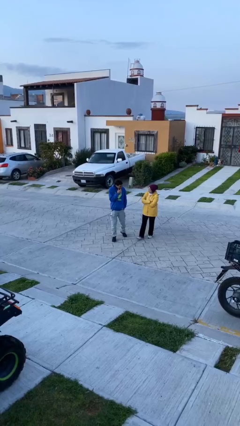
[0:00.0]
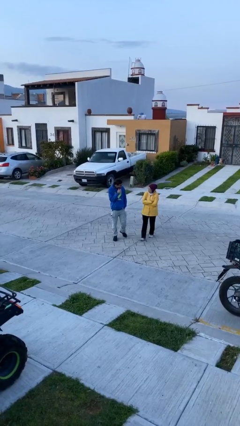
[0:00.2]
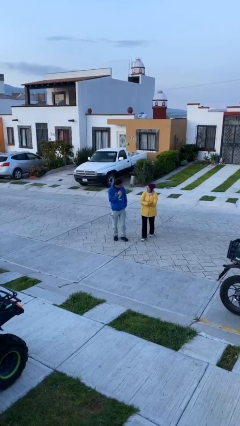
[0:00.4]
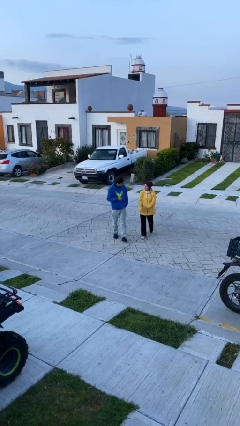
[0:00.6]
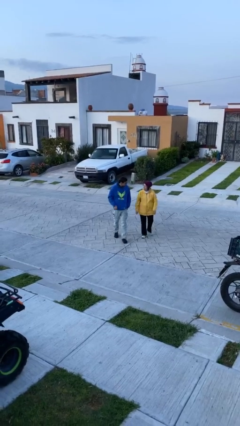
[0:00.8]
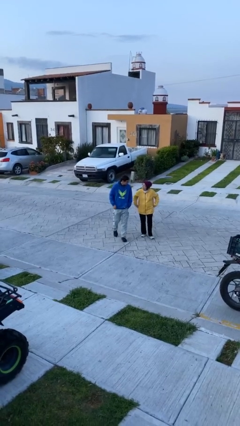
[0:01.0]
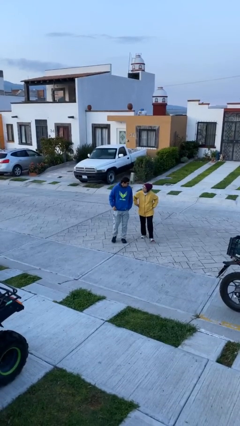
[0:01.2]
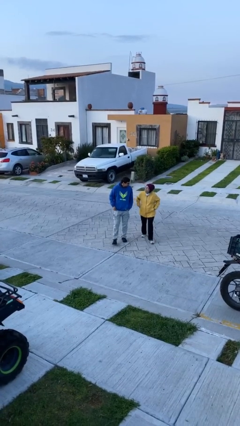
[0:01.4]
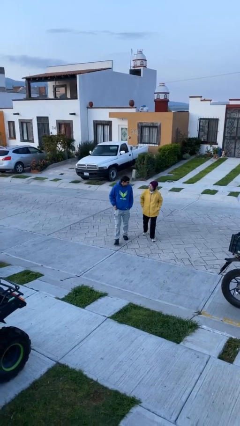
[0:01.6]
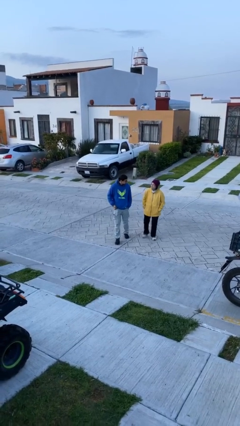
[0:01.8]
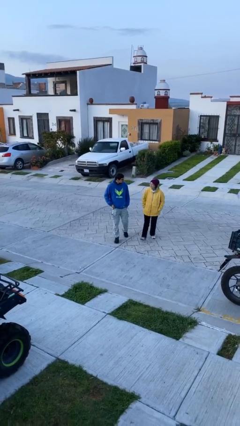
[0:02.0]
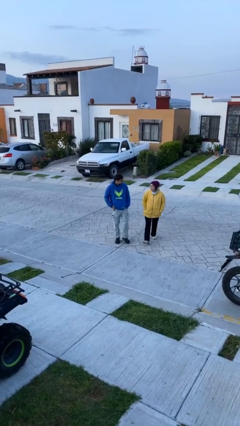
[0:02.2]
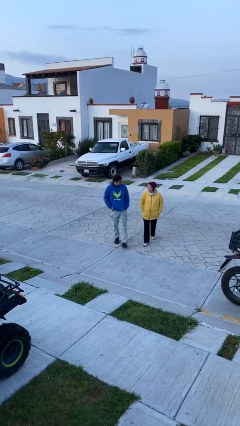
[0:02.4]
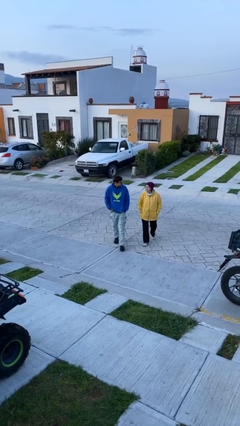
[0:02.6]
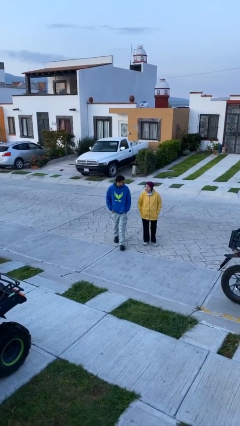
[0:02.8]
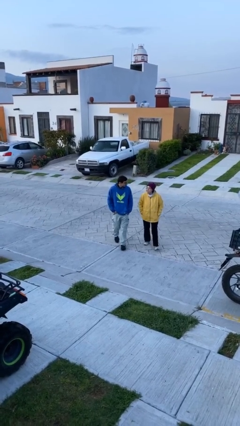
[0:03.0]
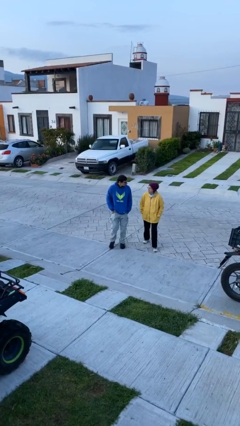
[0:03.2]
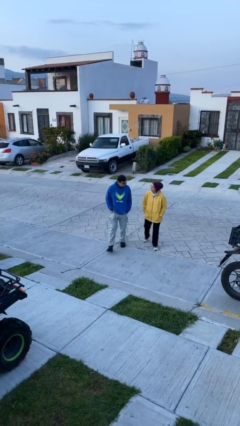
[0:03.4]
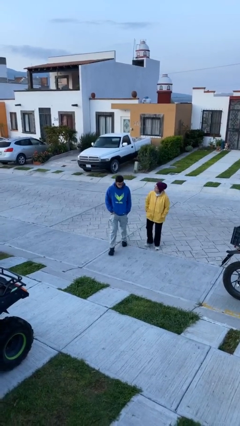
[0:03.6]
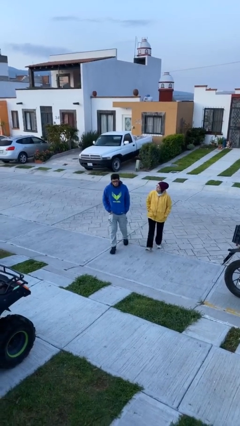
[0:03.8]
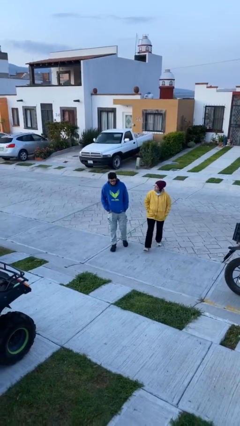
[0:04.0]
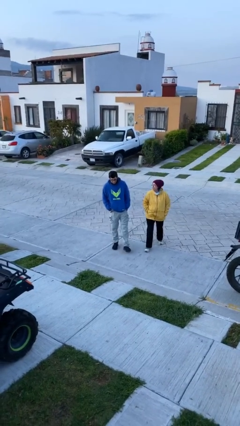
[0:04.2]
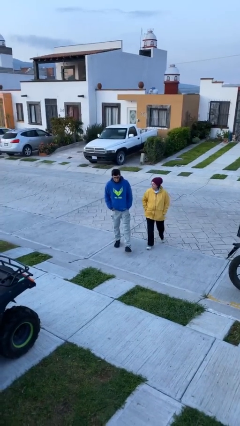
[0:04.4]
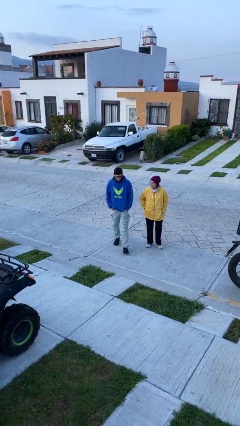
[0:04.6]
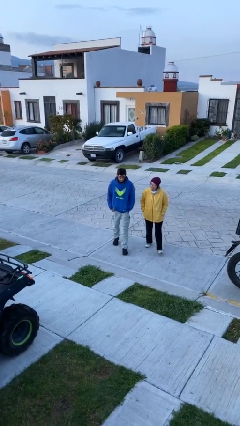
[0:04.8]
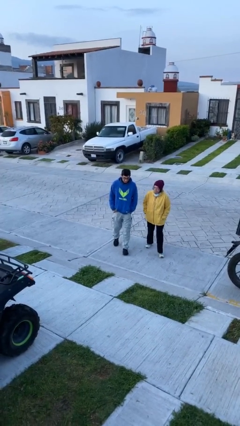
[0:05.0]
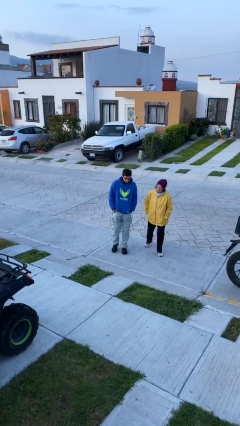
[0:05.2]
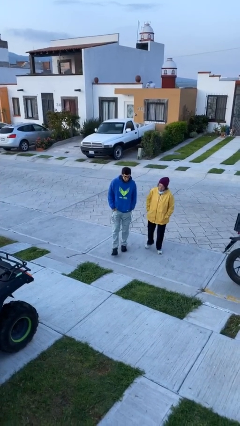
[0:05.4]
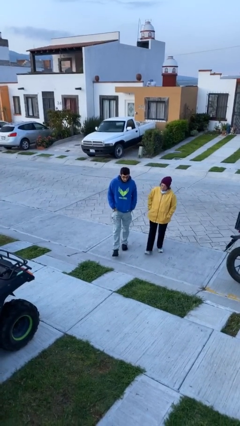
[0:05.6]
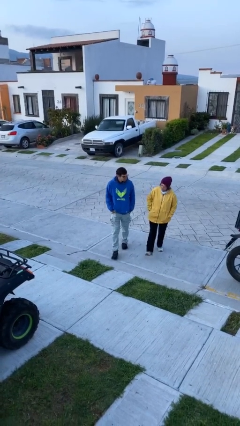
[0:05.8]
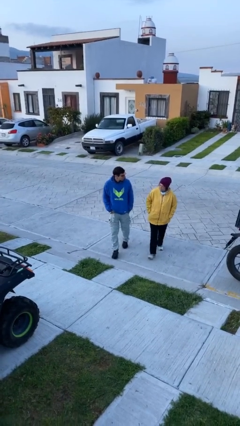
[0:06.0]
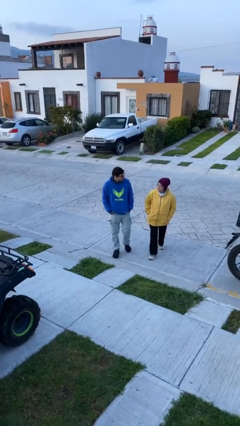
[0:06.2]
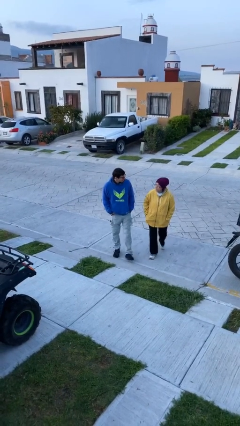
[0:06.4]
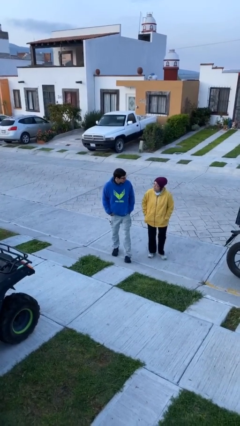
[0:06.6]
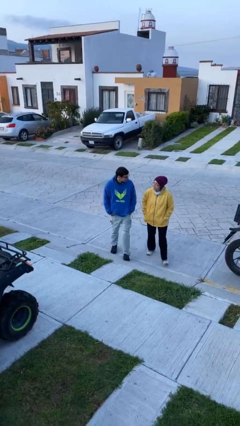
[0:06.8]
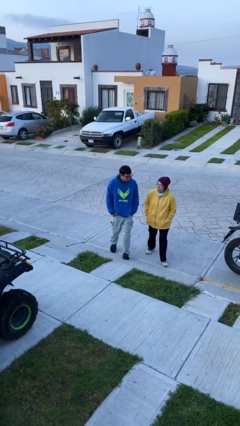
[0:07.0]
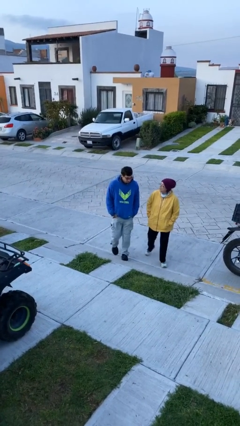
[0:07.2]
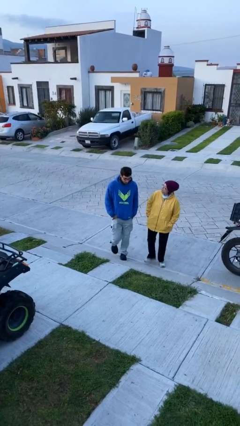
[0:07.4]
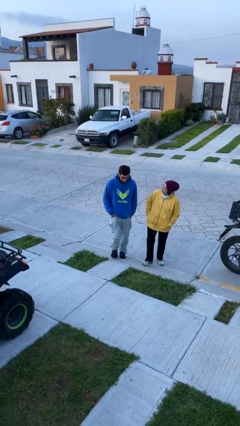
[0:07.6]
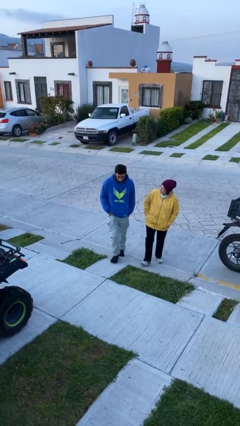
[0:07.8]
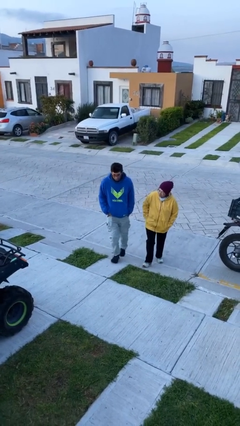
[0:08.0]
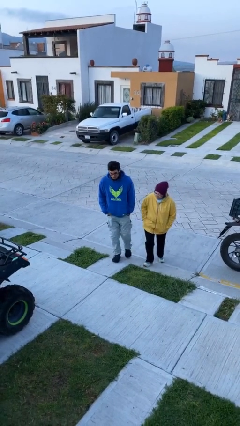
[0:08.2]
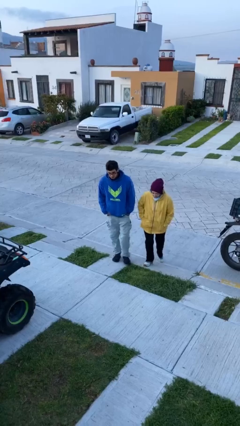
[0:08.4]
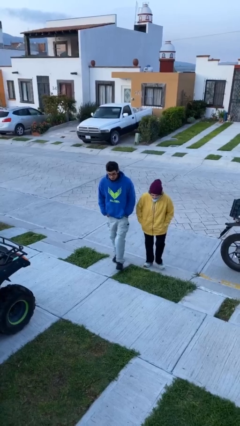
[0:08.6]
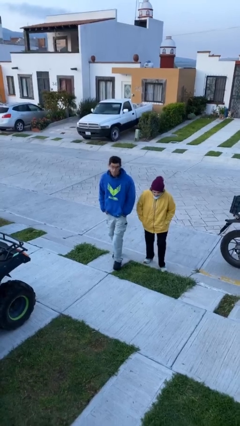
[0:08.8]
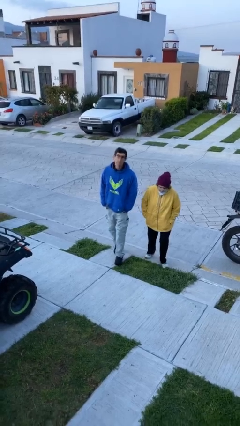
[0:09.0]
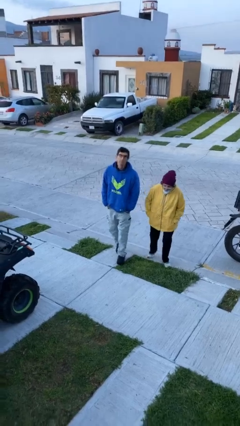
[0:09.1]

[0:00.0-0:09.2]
person talks to person

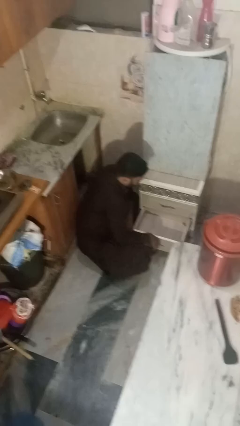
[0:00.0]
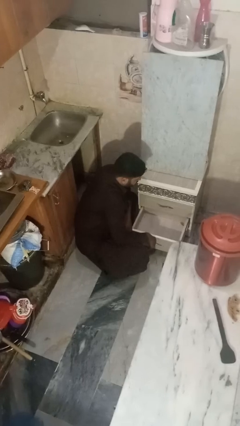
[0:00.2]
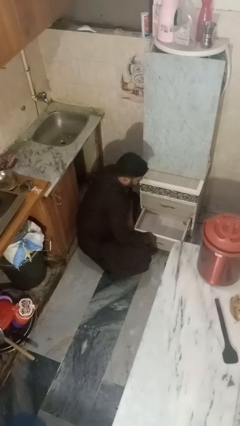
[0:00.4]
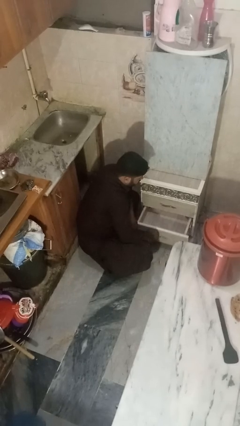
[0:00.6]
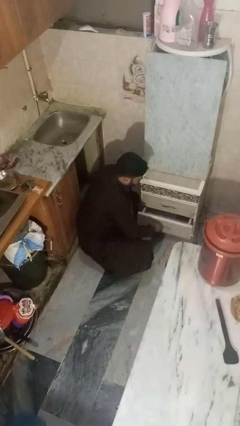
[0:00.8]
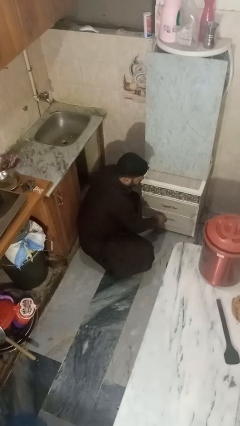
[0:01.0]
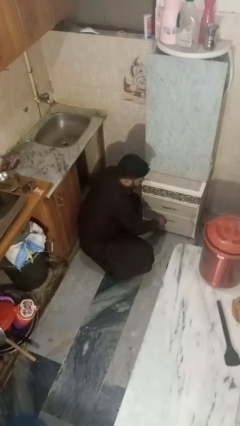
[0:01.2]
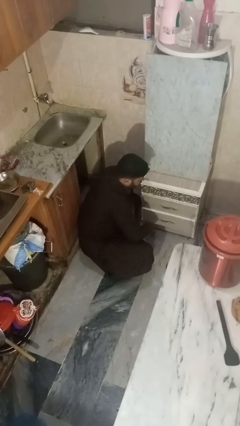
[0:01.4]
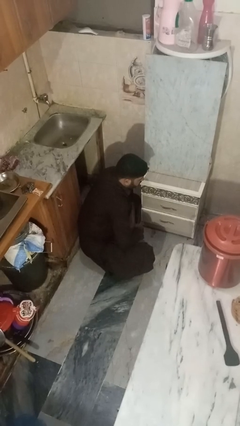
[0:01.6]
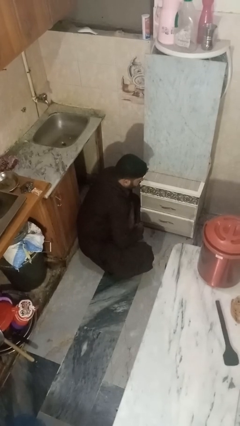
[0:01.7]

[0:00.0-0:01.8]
person closes kitchen drawer

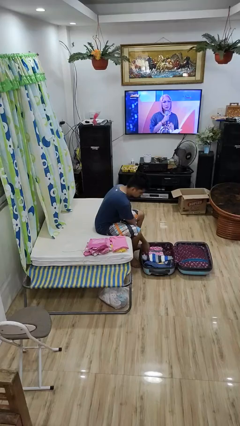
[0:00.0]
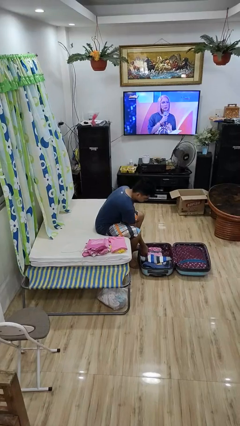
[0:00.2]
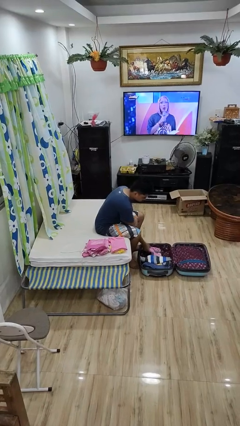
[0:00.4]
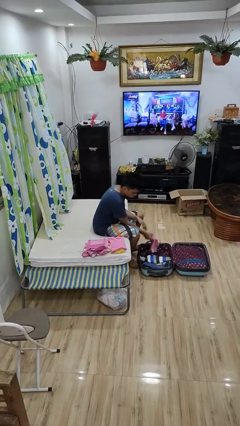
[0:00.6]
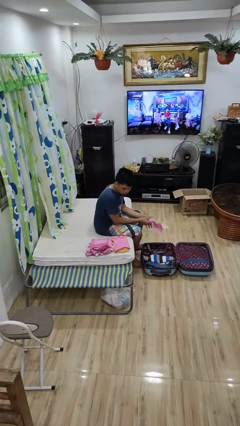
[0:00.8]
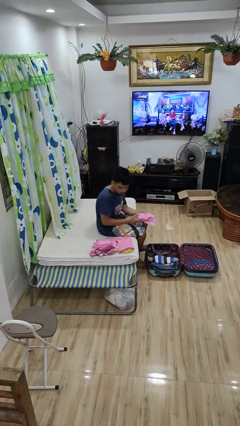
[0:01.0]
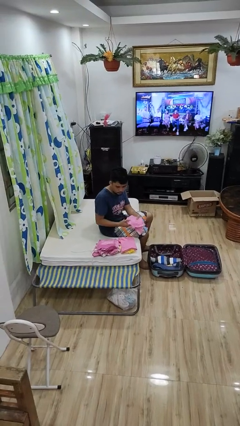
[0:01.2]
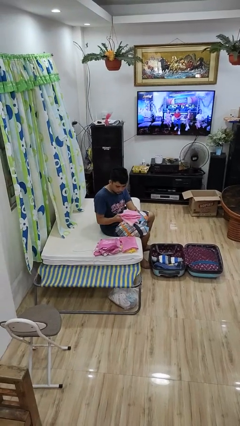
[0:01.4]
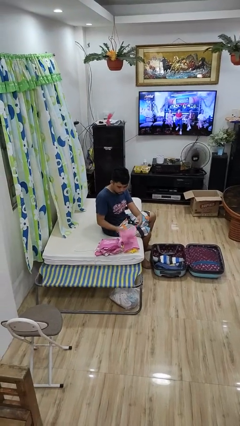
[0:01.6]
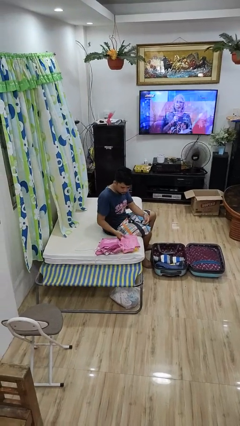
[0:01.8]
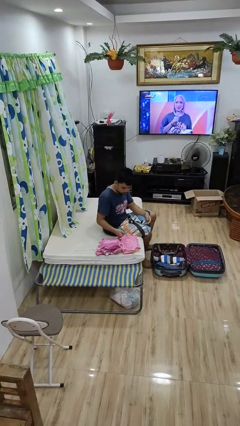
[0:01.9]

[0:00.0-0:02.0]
person unloads clothes from suitcase

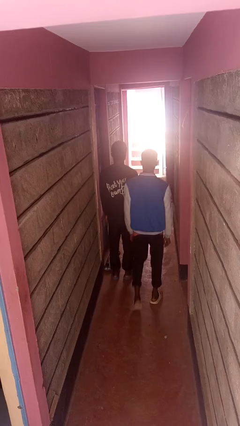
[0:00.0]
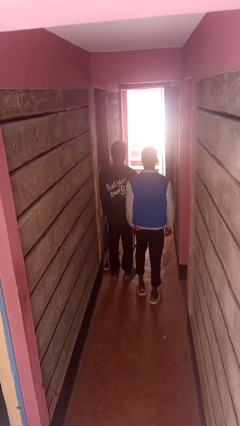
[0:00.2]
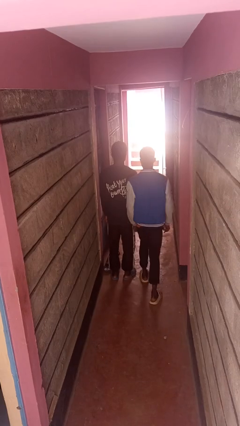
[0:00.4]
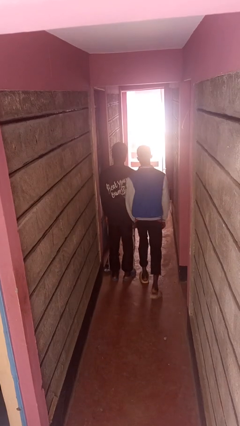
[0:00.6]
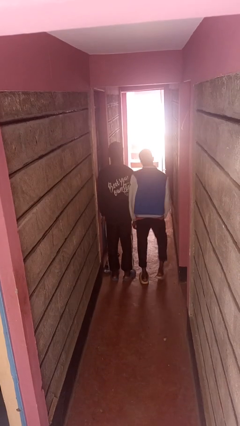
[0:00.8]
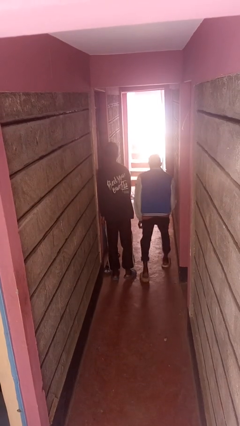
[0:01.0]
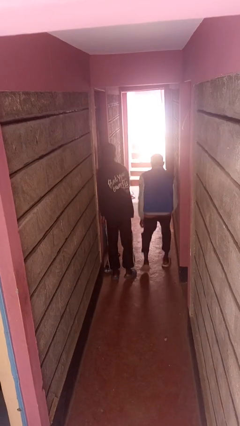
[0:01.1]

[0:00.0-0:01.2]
person bumps into person

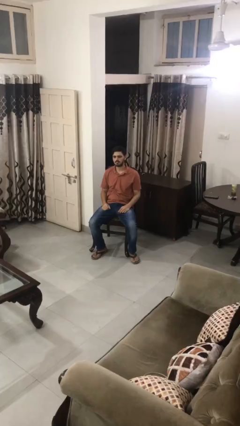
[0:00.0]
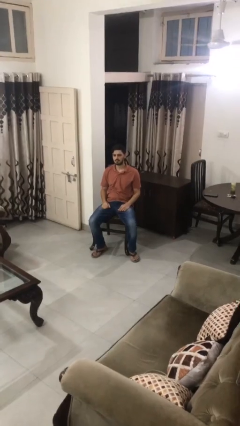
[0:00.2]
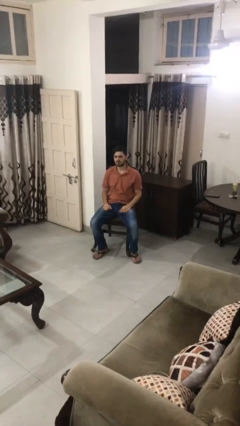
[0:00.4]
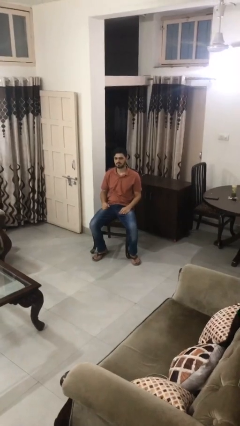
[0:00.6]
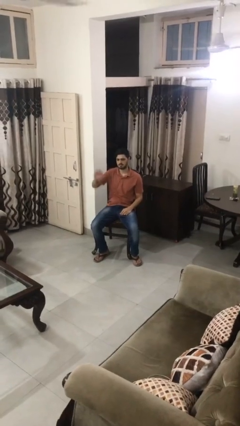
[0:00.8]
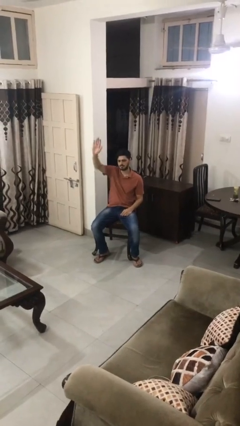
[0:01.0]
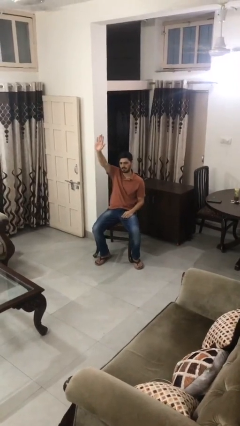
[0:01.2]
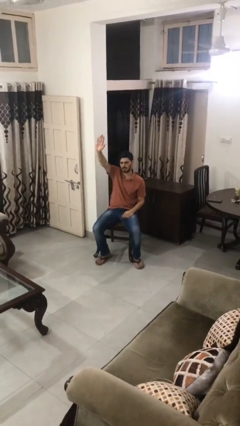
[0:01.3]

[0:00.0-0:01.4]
person gestures raise hand

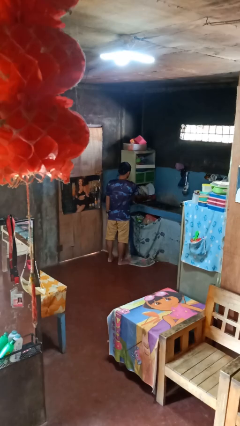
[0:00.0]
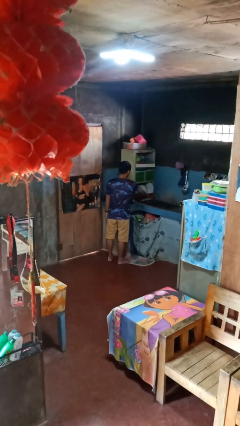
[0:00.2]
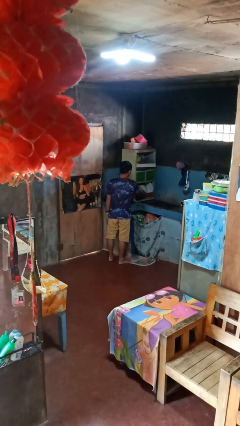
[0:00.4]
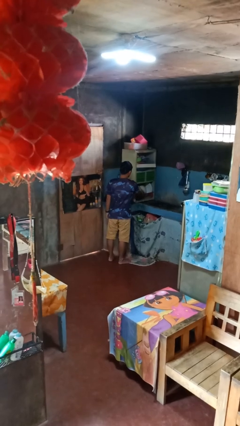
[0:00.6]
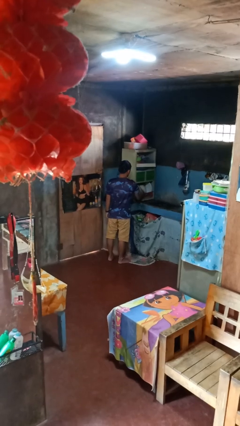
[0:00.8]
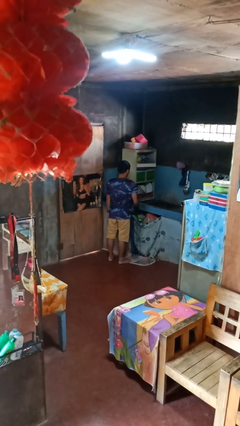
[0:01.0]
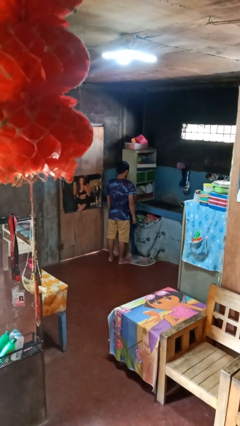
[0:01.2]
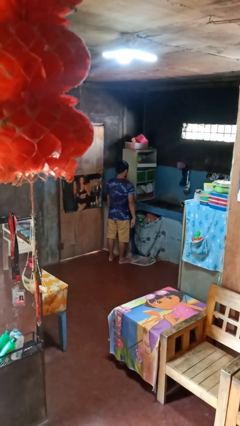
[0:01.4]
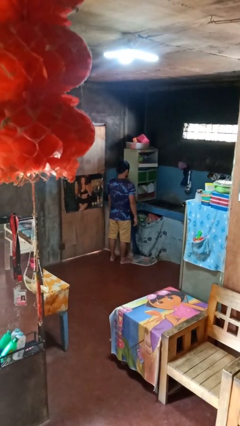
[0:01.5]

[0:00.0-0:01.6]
person closes dishwasher

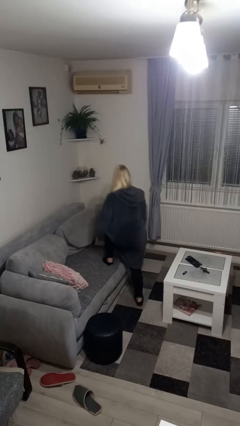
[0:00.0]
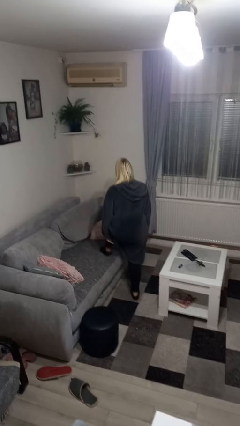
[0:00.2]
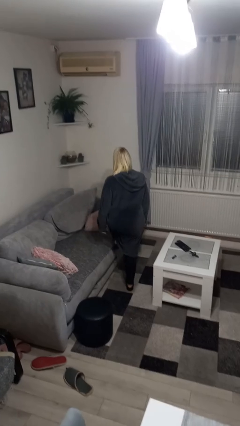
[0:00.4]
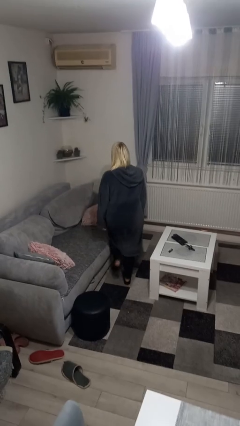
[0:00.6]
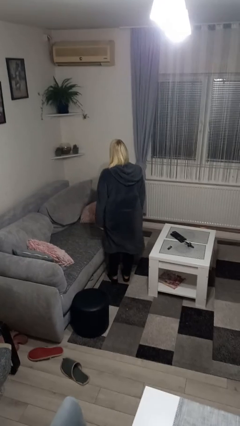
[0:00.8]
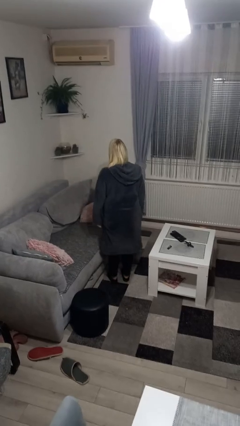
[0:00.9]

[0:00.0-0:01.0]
person climbs off couch
